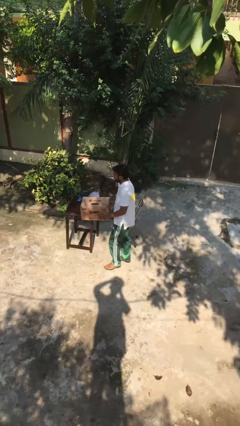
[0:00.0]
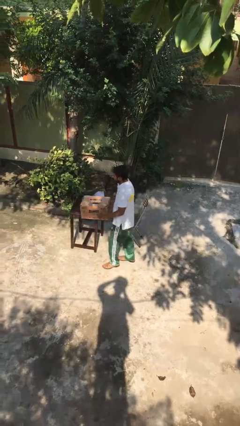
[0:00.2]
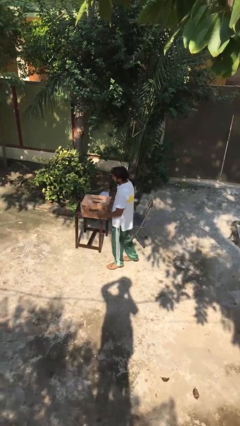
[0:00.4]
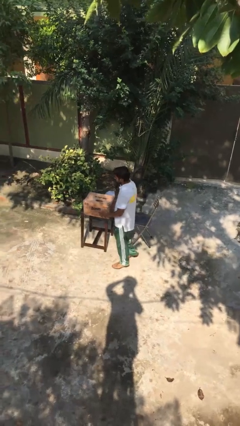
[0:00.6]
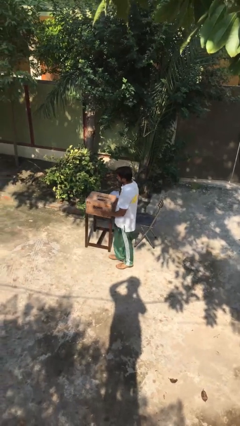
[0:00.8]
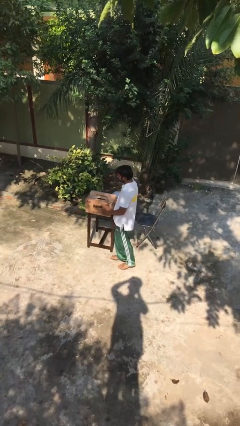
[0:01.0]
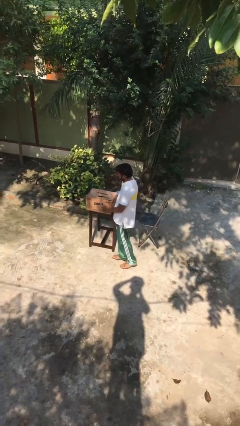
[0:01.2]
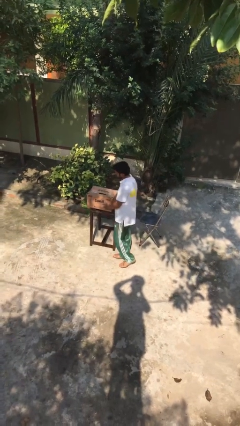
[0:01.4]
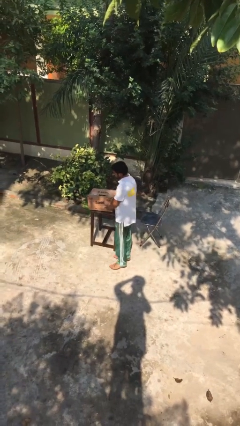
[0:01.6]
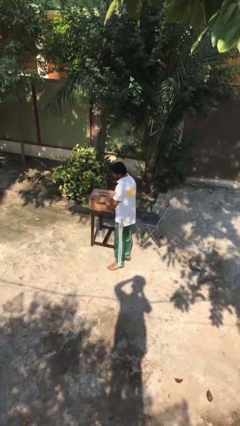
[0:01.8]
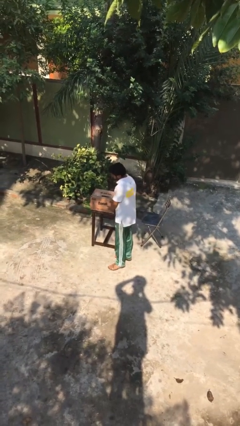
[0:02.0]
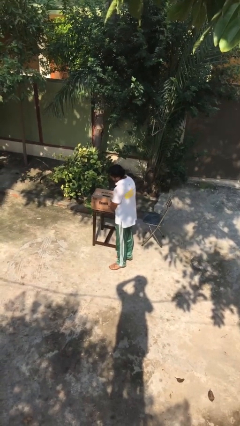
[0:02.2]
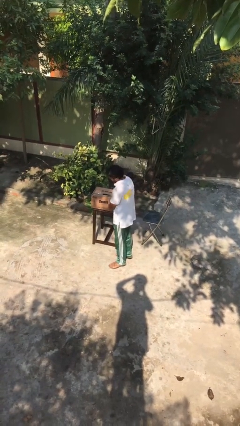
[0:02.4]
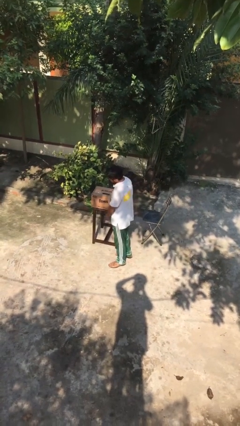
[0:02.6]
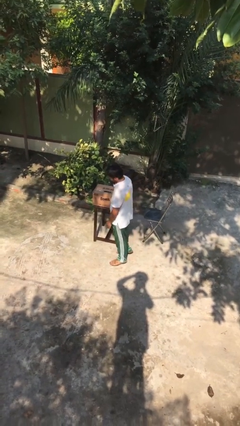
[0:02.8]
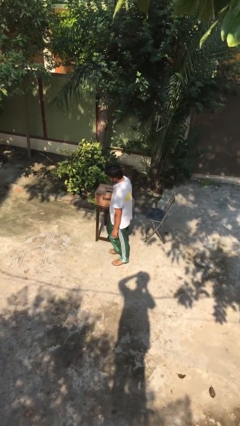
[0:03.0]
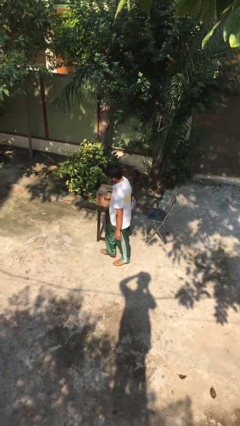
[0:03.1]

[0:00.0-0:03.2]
person puts down object on table

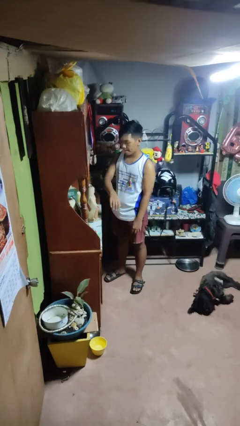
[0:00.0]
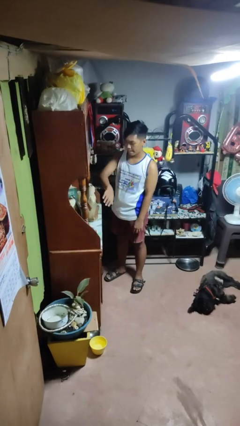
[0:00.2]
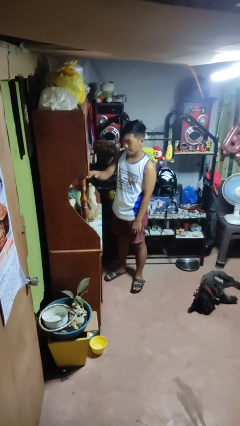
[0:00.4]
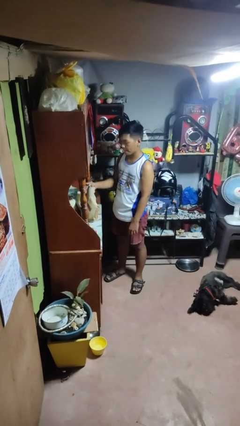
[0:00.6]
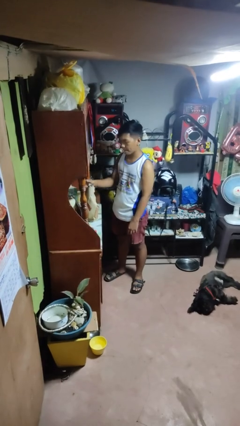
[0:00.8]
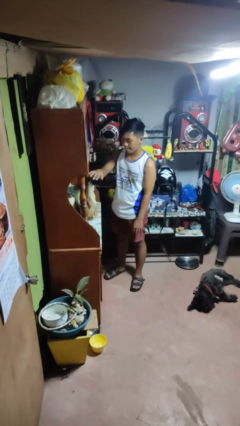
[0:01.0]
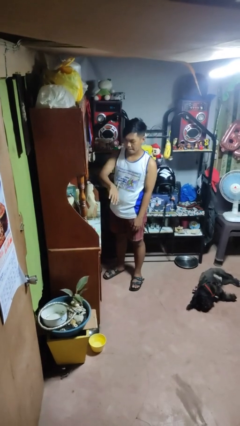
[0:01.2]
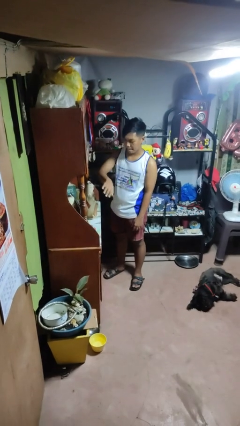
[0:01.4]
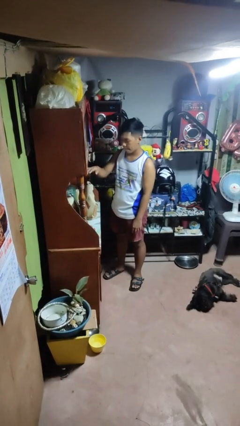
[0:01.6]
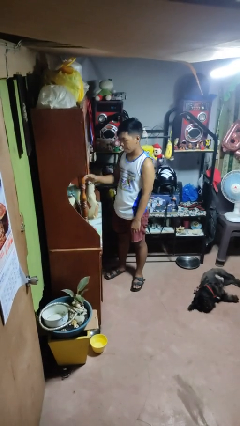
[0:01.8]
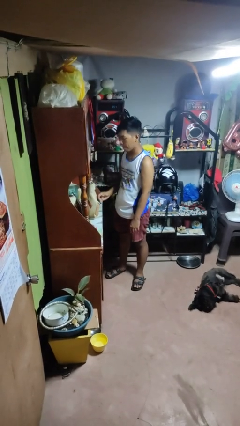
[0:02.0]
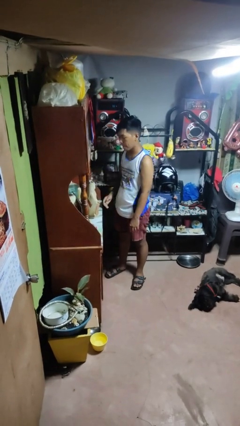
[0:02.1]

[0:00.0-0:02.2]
person waves hand over object

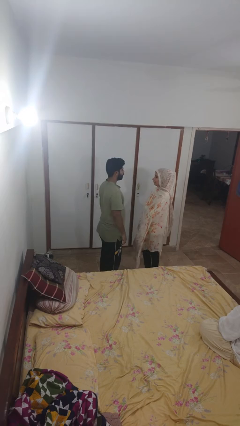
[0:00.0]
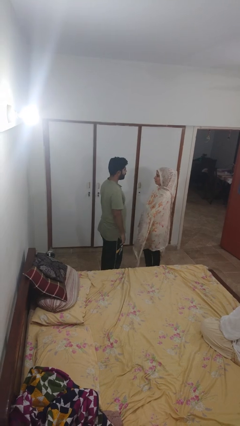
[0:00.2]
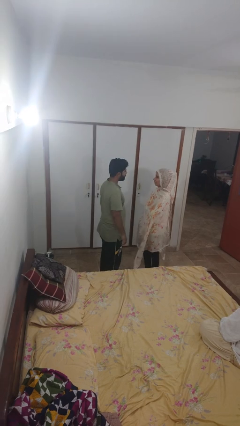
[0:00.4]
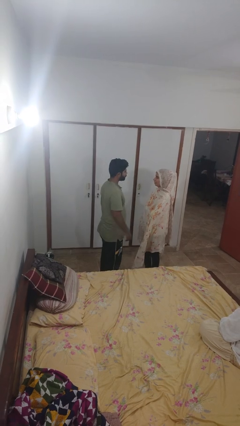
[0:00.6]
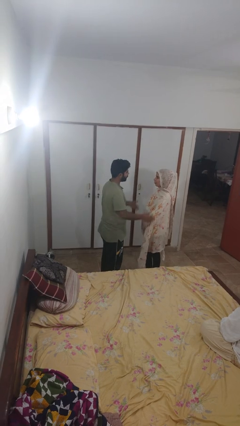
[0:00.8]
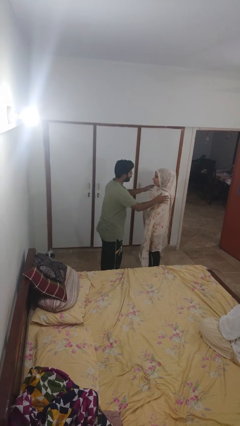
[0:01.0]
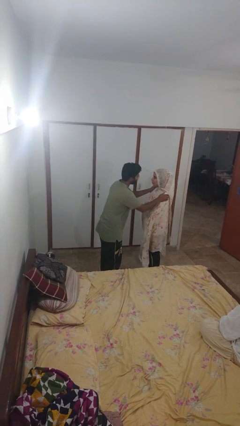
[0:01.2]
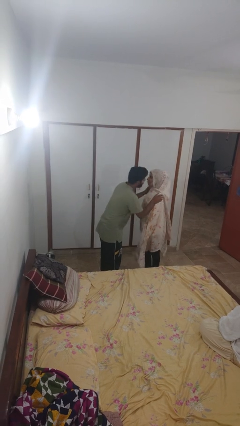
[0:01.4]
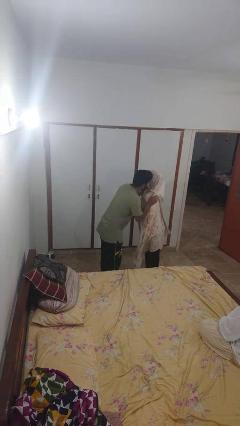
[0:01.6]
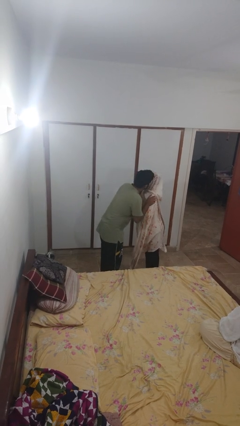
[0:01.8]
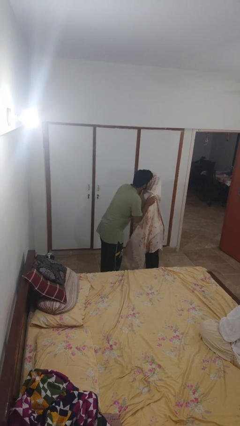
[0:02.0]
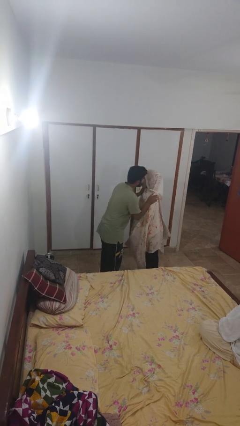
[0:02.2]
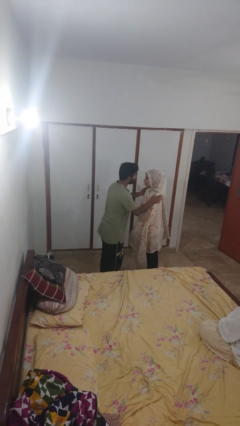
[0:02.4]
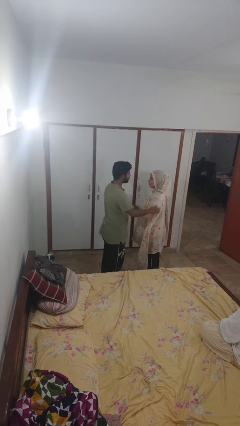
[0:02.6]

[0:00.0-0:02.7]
person kisses cheek of person

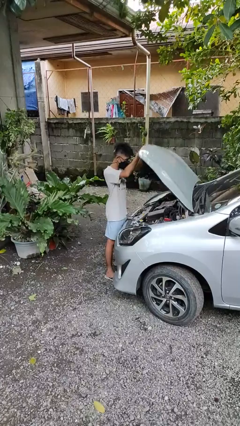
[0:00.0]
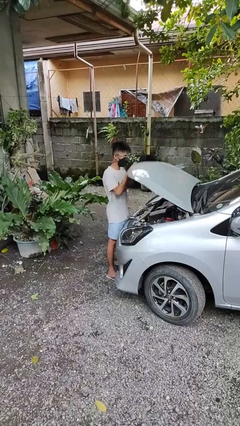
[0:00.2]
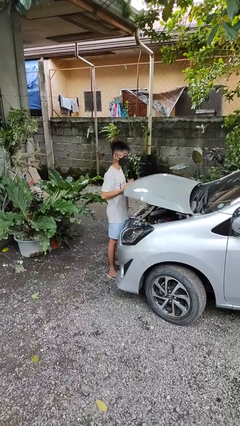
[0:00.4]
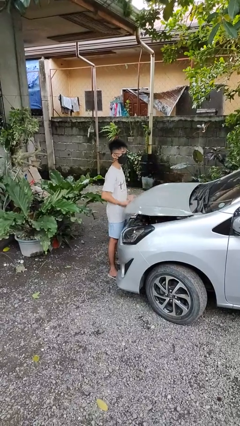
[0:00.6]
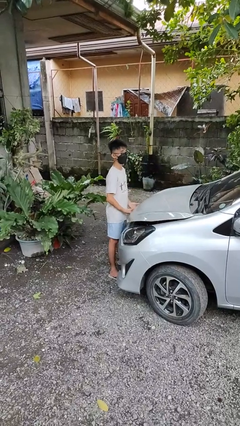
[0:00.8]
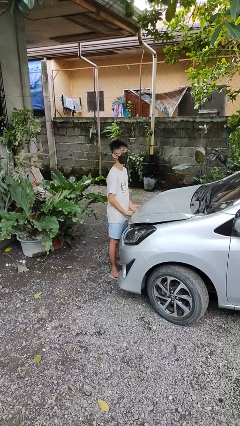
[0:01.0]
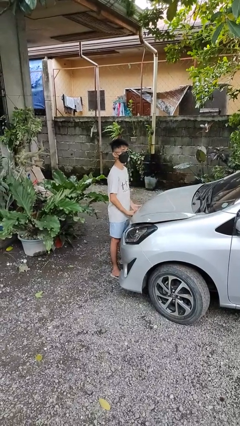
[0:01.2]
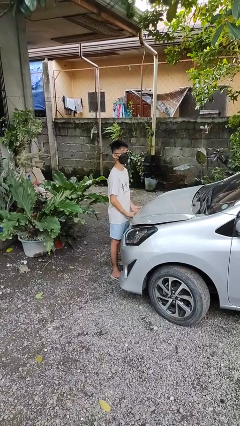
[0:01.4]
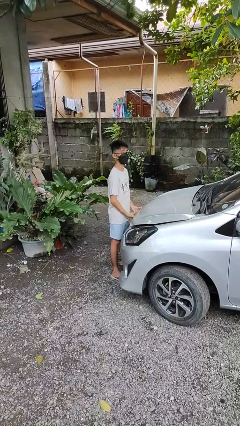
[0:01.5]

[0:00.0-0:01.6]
person closes car hood

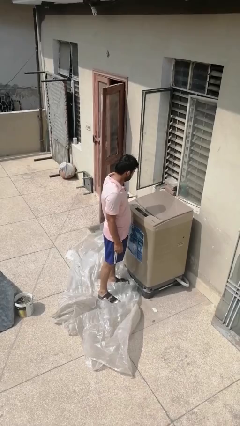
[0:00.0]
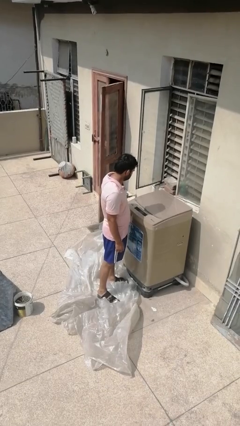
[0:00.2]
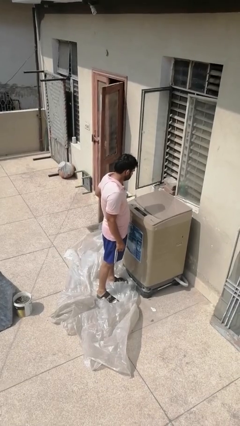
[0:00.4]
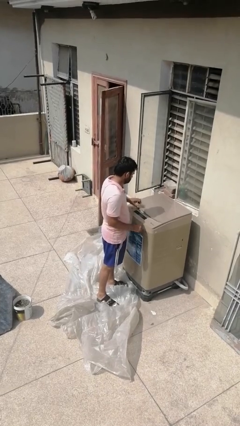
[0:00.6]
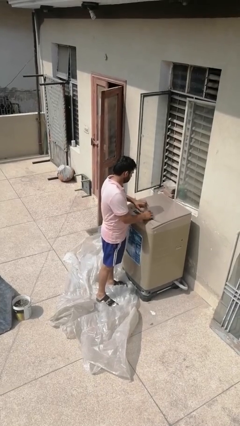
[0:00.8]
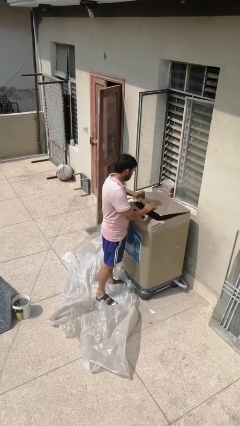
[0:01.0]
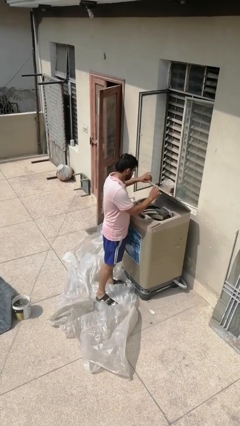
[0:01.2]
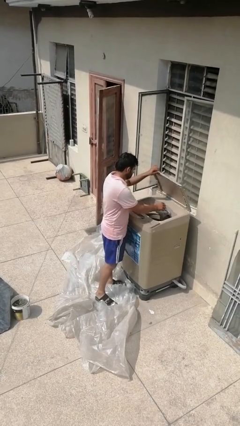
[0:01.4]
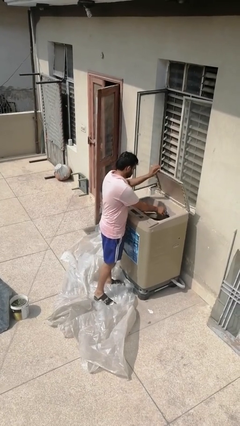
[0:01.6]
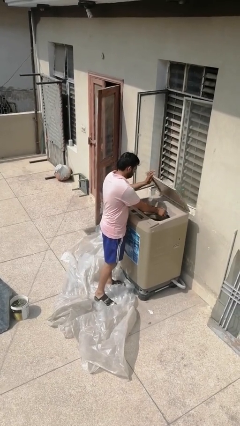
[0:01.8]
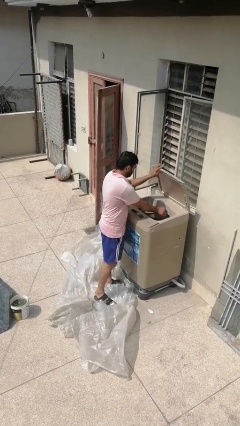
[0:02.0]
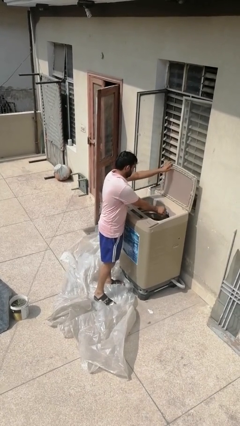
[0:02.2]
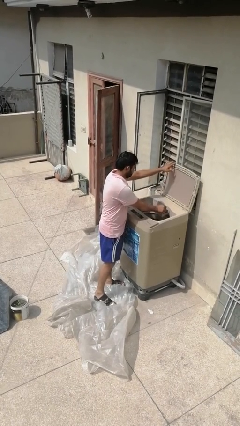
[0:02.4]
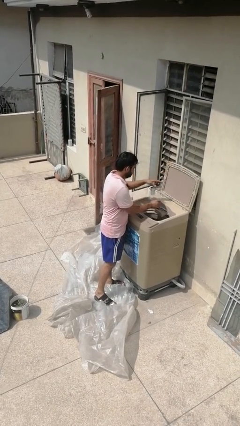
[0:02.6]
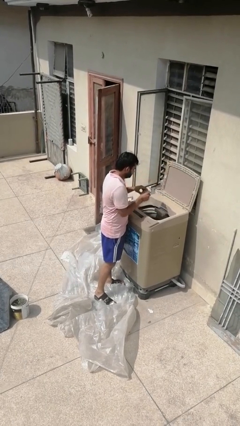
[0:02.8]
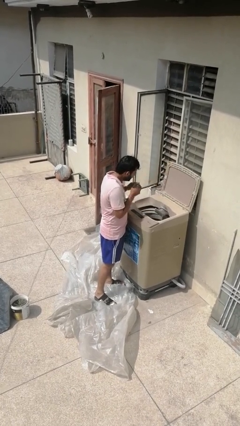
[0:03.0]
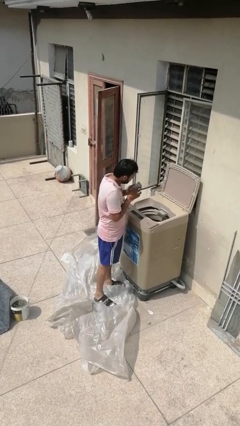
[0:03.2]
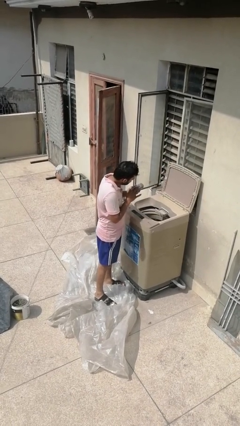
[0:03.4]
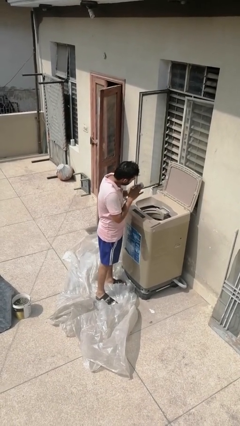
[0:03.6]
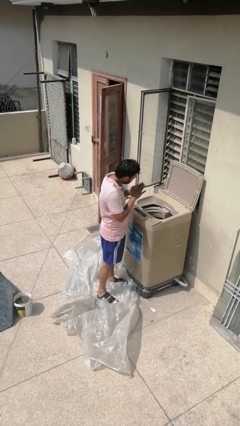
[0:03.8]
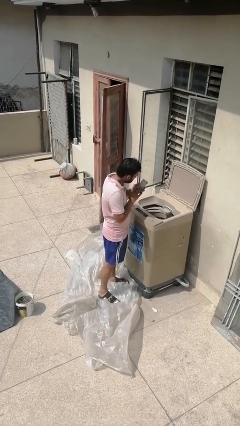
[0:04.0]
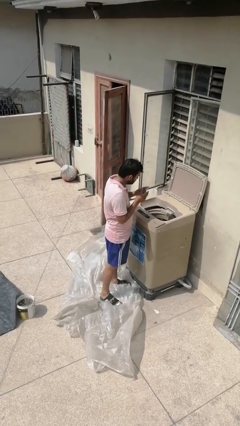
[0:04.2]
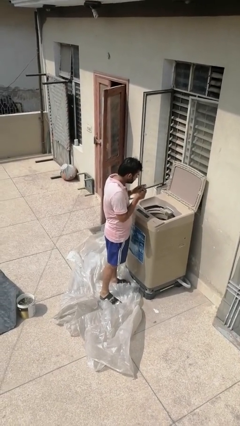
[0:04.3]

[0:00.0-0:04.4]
person cleans dryer lint trap

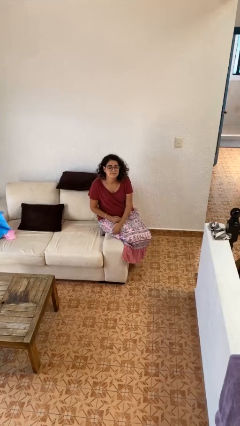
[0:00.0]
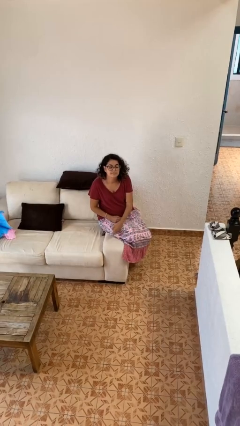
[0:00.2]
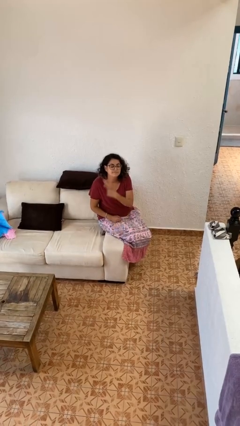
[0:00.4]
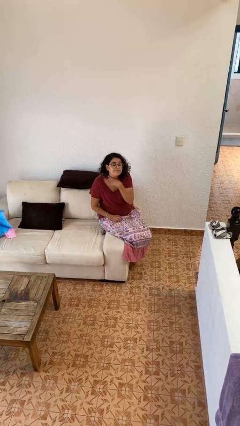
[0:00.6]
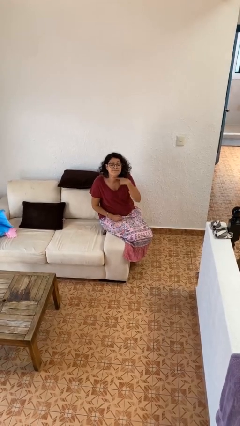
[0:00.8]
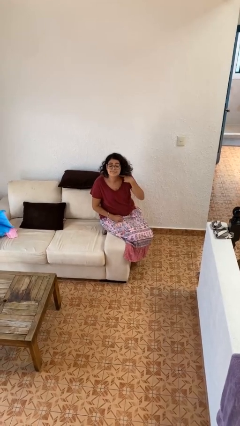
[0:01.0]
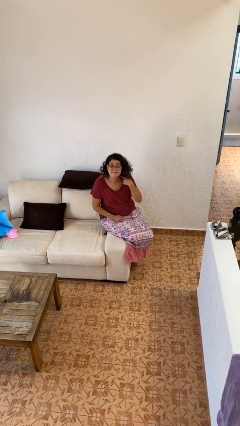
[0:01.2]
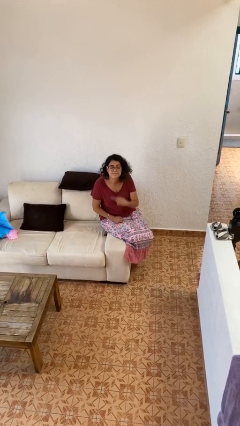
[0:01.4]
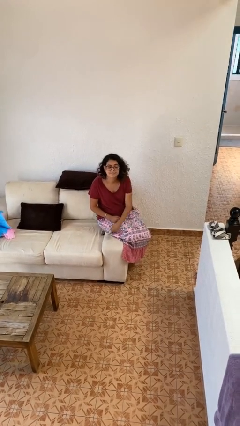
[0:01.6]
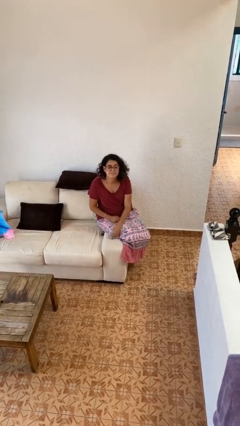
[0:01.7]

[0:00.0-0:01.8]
person gestures cut

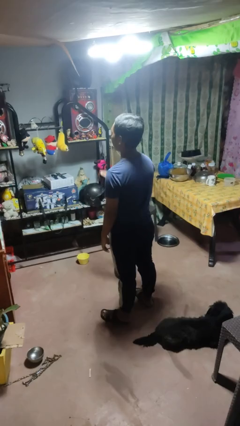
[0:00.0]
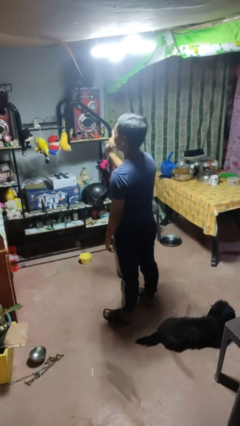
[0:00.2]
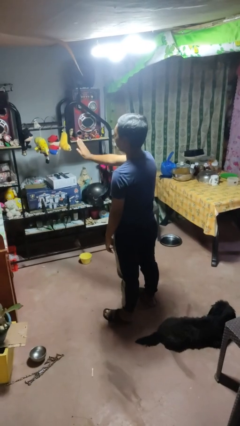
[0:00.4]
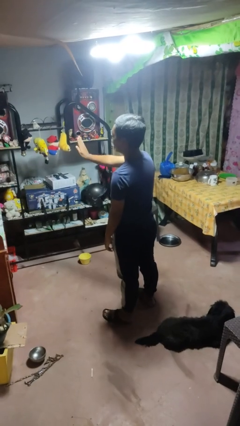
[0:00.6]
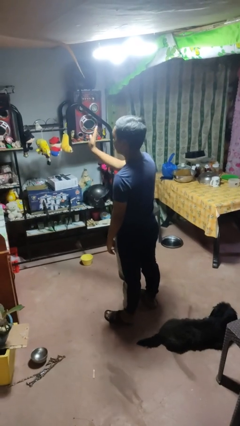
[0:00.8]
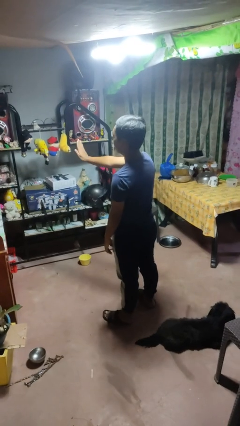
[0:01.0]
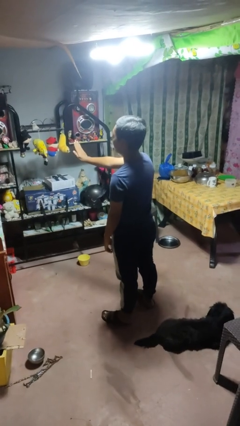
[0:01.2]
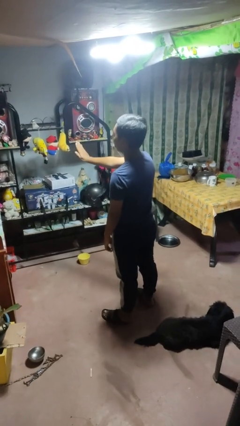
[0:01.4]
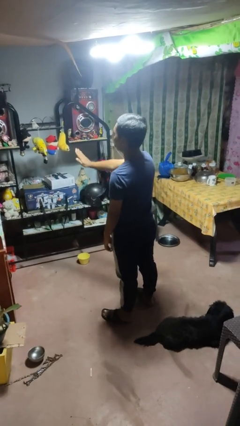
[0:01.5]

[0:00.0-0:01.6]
person gestures stop
